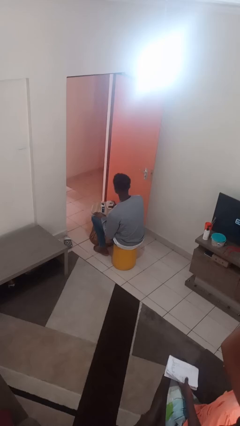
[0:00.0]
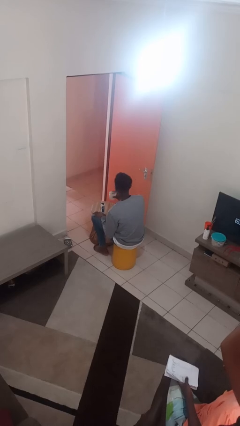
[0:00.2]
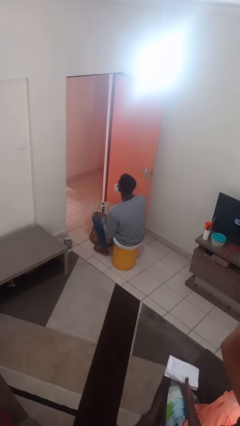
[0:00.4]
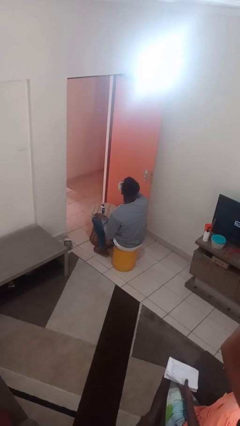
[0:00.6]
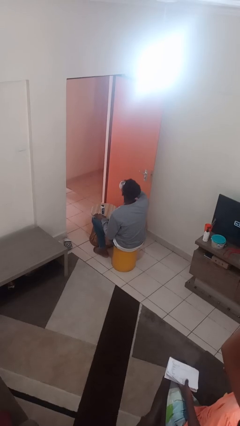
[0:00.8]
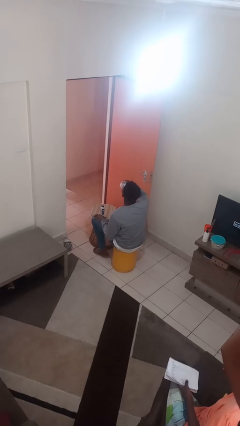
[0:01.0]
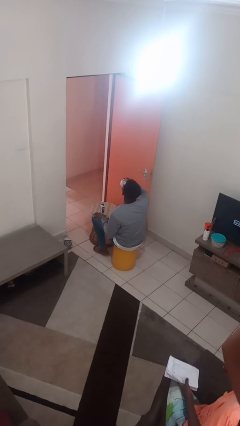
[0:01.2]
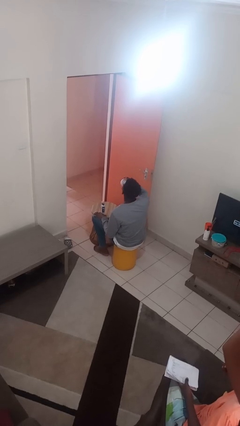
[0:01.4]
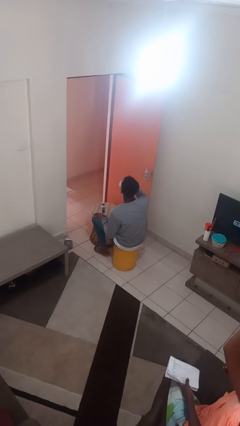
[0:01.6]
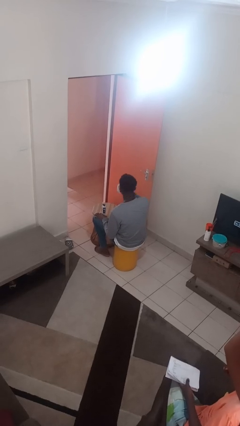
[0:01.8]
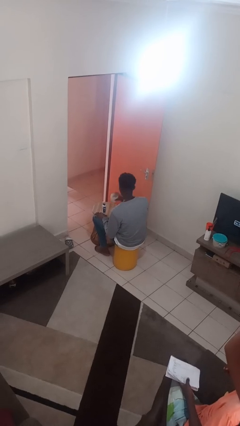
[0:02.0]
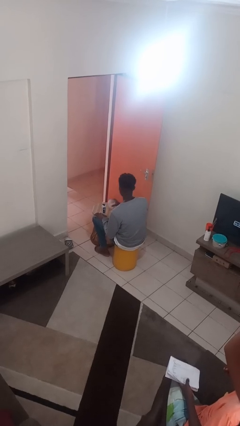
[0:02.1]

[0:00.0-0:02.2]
person drinks from cup

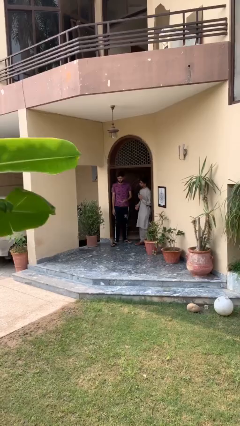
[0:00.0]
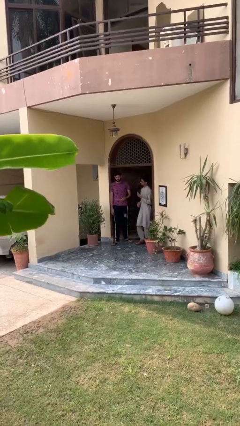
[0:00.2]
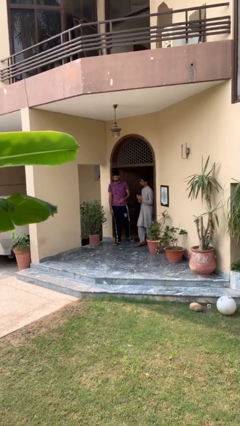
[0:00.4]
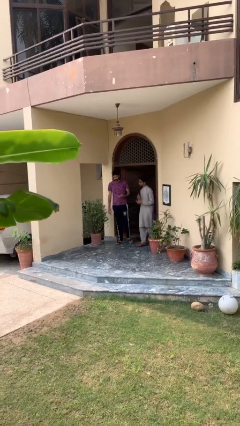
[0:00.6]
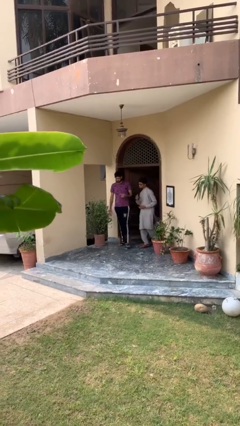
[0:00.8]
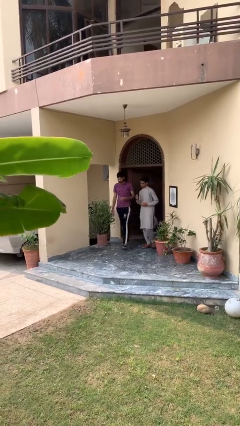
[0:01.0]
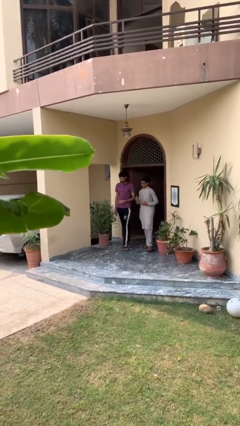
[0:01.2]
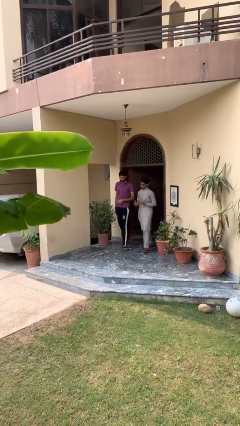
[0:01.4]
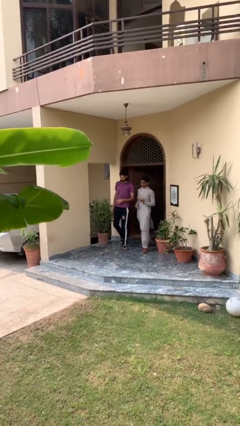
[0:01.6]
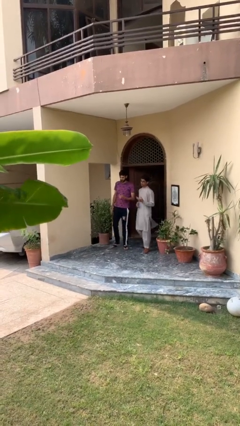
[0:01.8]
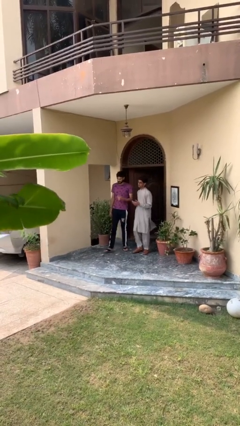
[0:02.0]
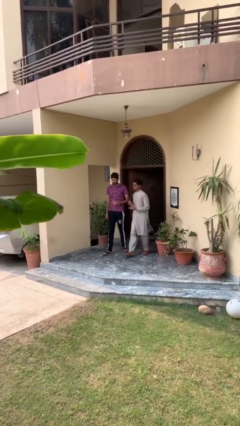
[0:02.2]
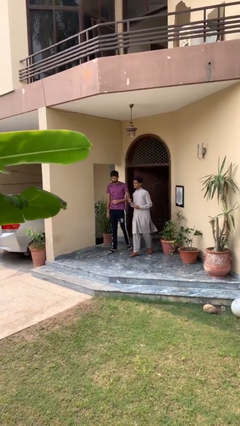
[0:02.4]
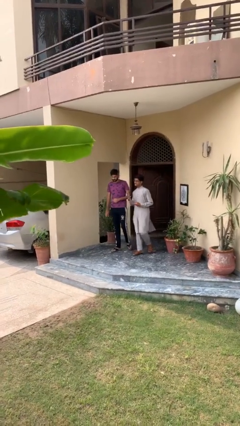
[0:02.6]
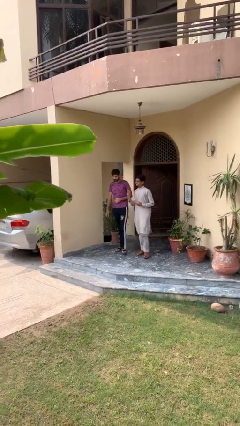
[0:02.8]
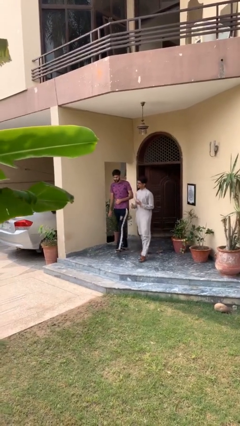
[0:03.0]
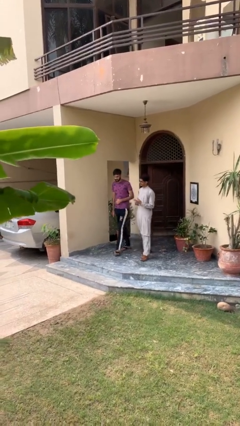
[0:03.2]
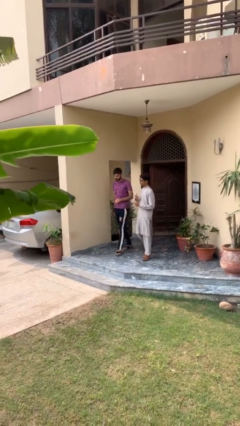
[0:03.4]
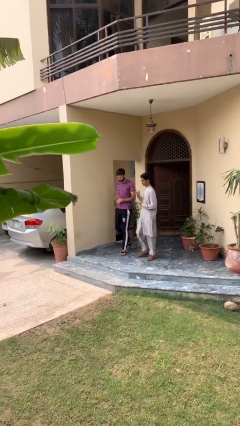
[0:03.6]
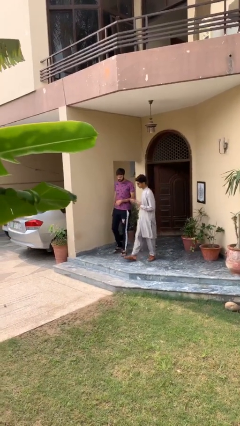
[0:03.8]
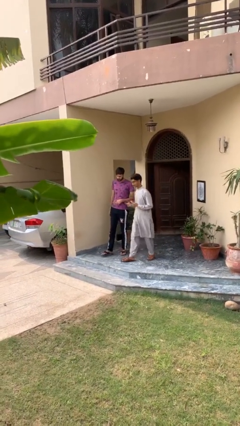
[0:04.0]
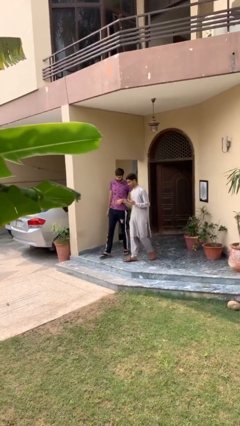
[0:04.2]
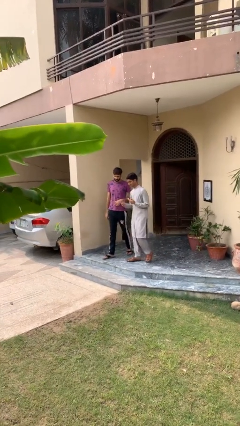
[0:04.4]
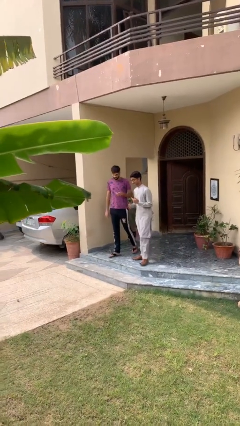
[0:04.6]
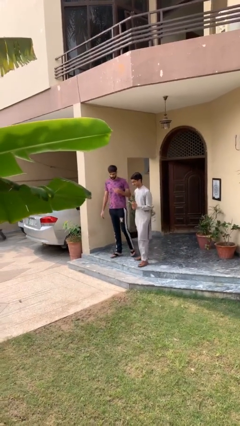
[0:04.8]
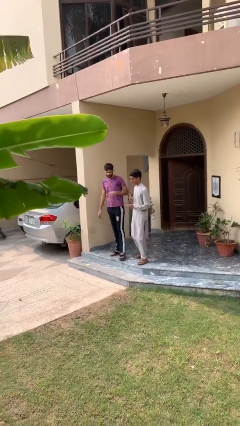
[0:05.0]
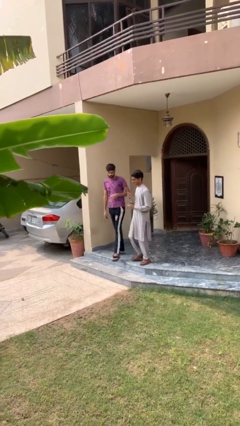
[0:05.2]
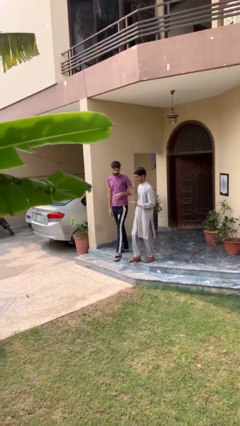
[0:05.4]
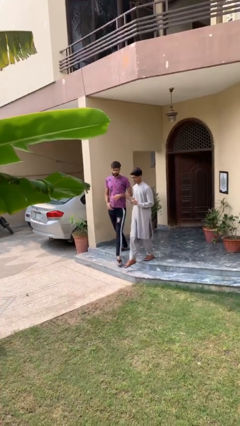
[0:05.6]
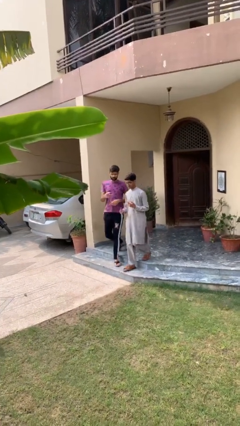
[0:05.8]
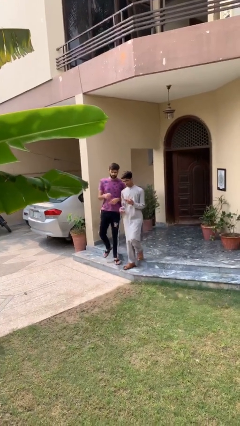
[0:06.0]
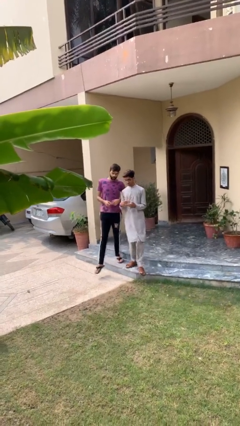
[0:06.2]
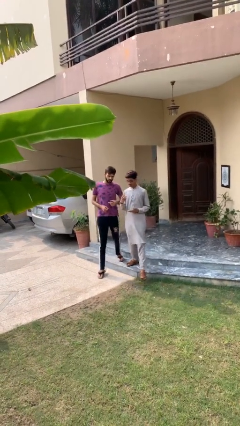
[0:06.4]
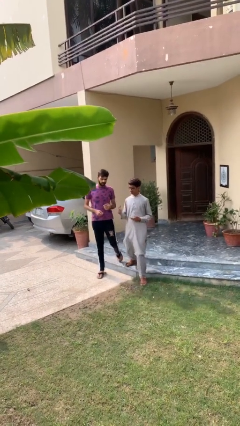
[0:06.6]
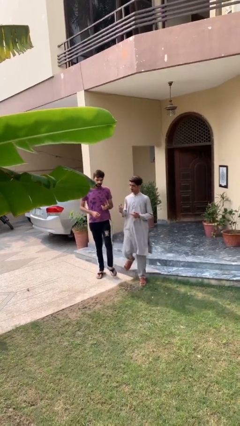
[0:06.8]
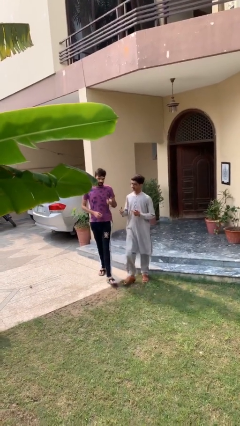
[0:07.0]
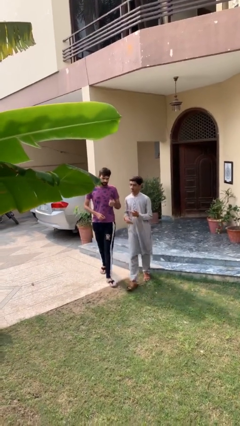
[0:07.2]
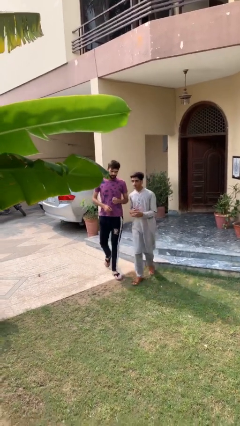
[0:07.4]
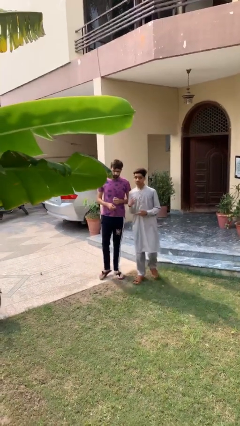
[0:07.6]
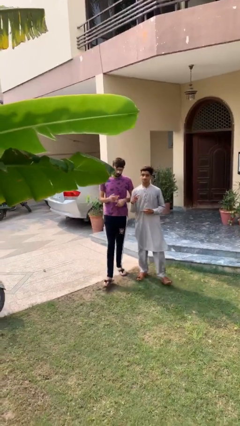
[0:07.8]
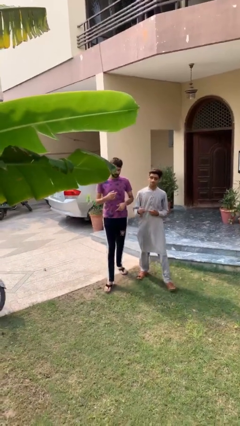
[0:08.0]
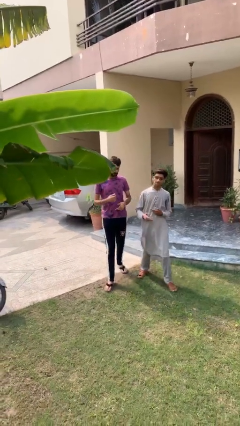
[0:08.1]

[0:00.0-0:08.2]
person talks to person

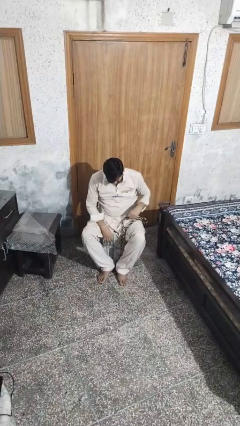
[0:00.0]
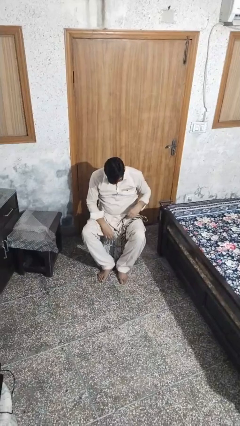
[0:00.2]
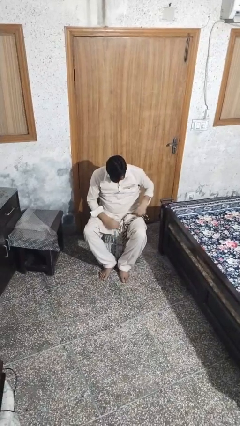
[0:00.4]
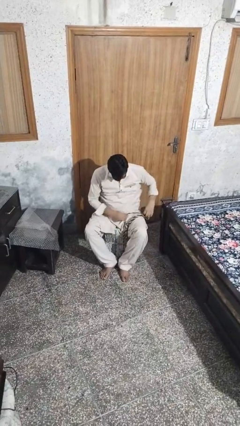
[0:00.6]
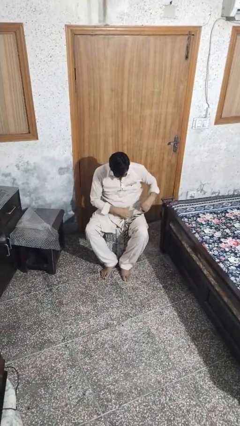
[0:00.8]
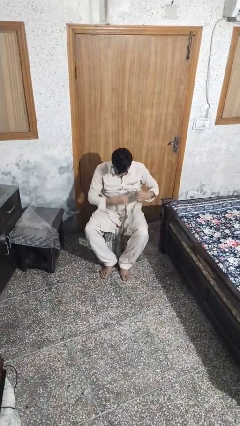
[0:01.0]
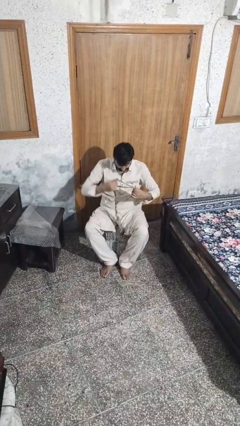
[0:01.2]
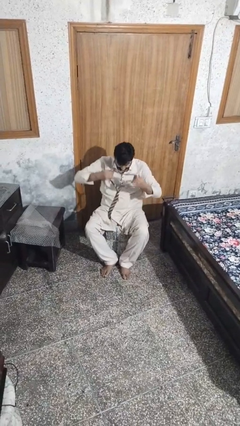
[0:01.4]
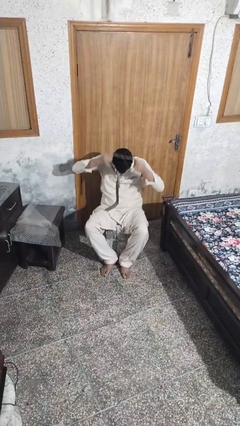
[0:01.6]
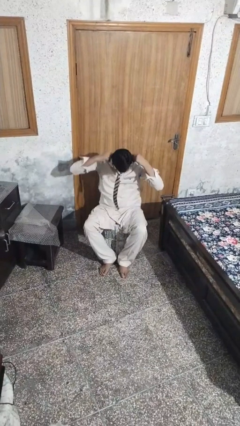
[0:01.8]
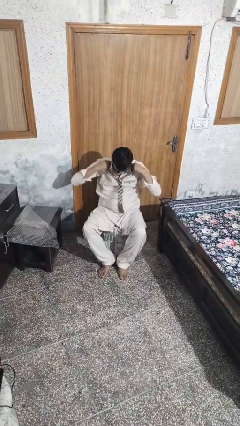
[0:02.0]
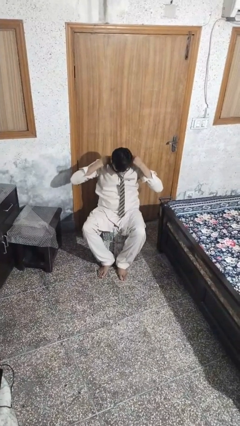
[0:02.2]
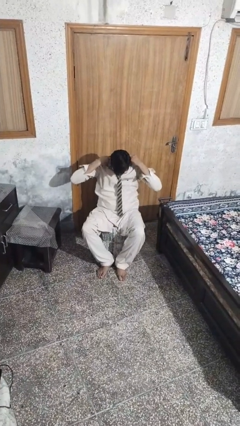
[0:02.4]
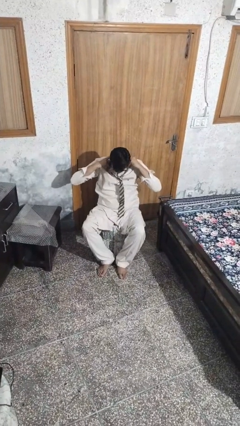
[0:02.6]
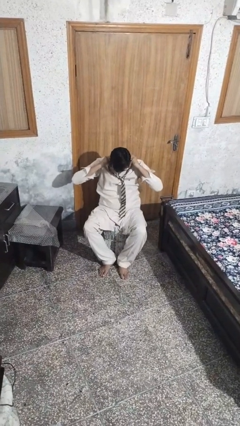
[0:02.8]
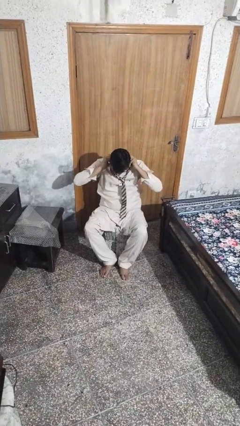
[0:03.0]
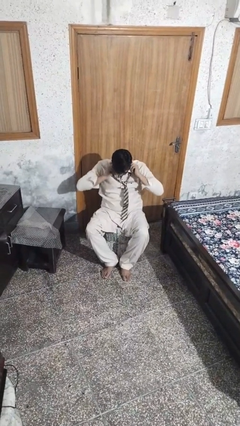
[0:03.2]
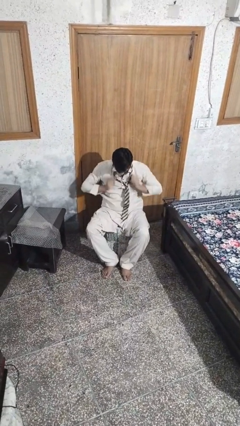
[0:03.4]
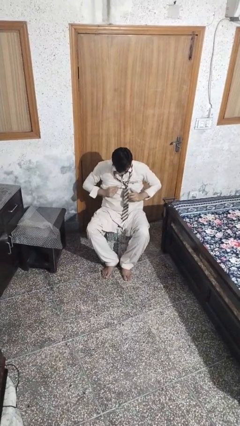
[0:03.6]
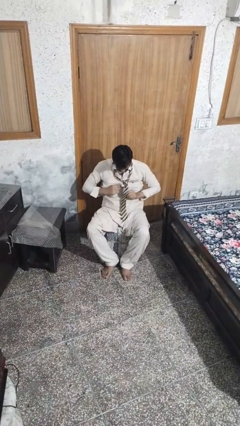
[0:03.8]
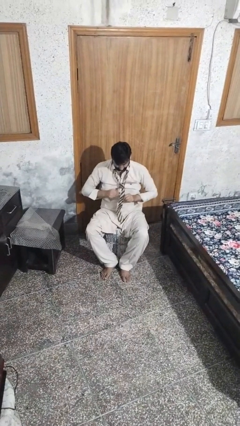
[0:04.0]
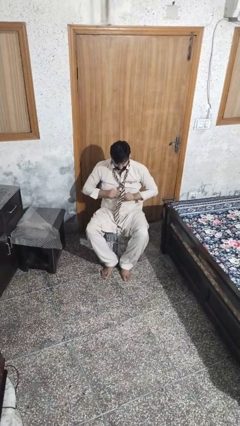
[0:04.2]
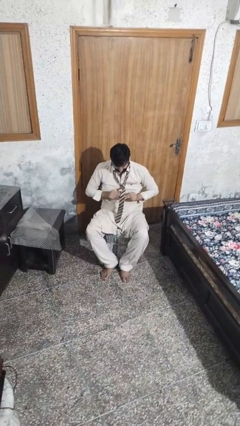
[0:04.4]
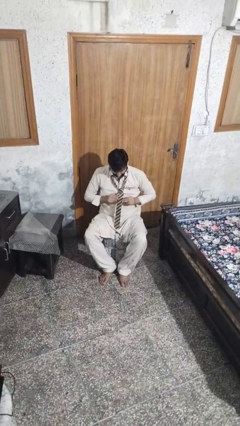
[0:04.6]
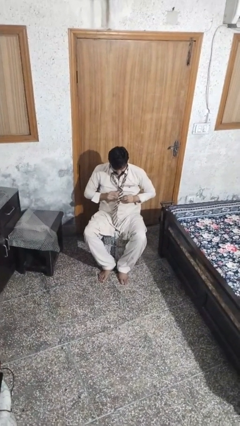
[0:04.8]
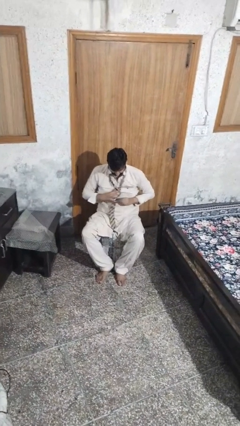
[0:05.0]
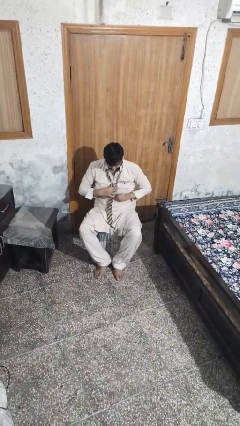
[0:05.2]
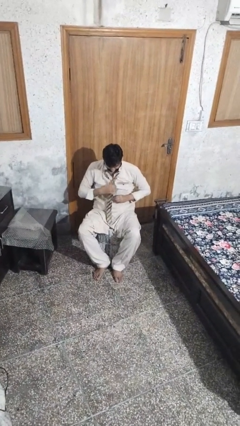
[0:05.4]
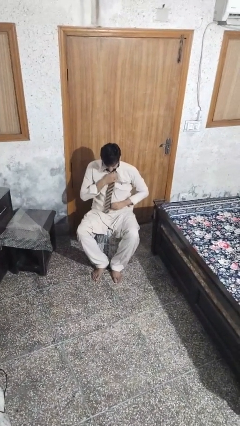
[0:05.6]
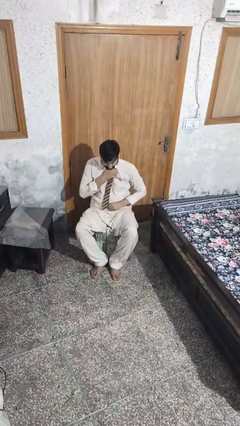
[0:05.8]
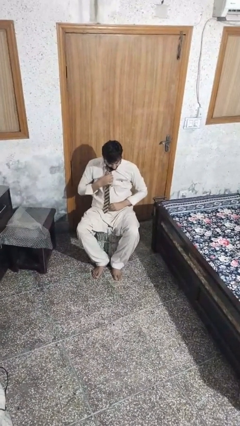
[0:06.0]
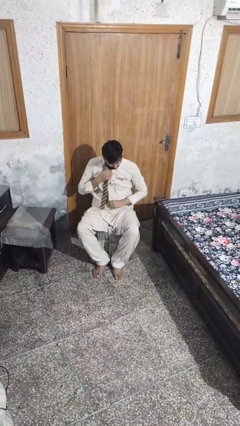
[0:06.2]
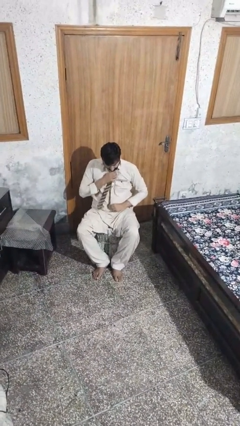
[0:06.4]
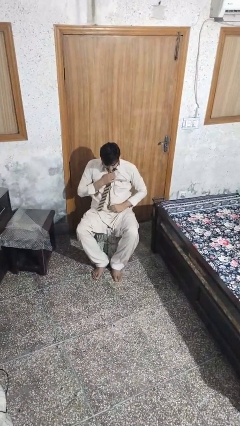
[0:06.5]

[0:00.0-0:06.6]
person puts on necktie

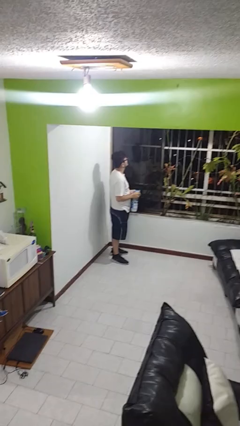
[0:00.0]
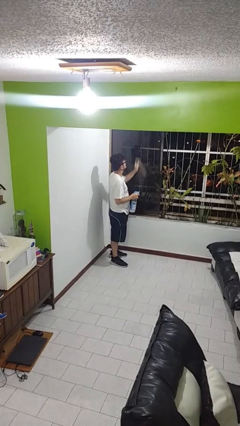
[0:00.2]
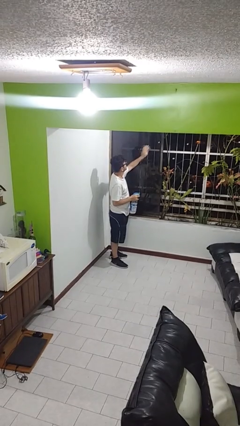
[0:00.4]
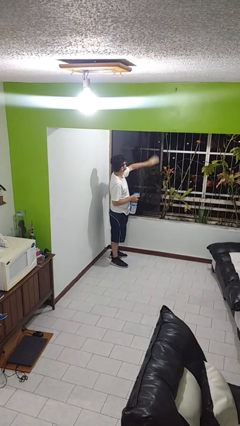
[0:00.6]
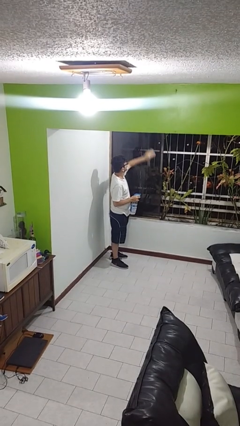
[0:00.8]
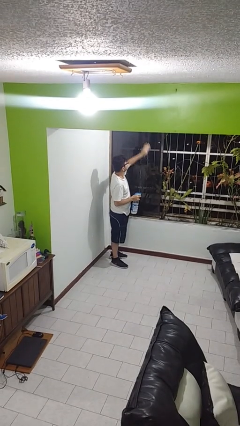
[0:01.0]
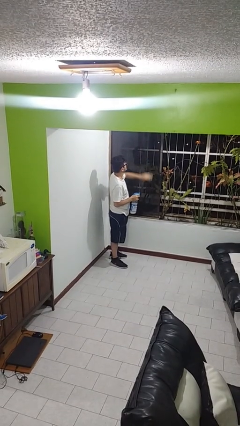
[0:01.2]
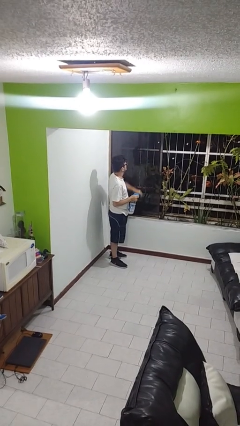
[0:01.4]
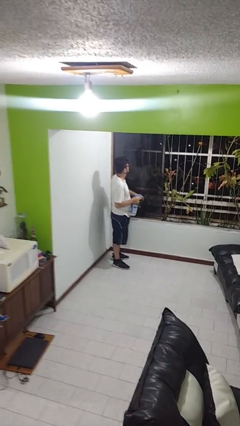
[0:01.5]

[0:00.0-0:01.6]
person washes window
